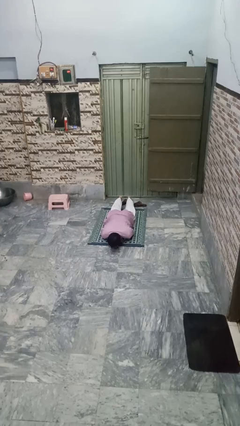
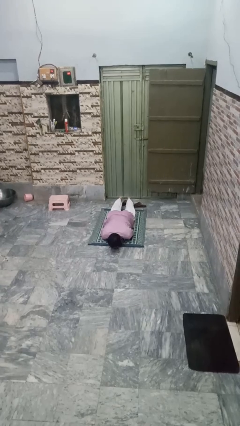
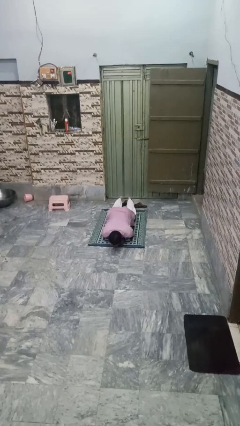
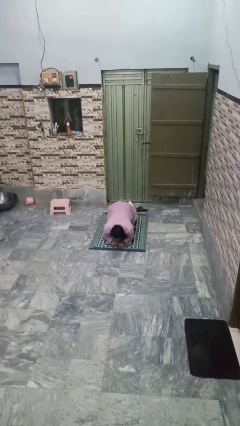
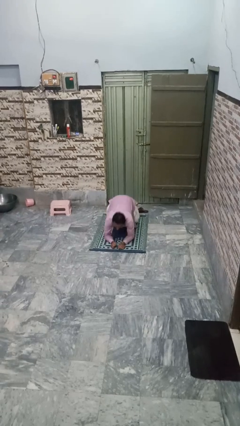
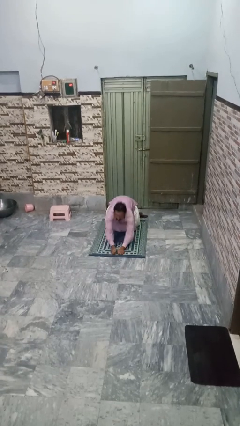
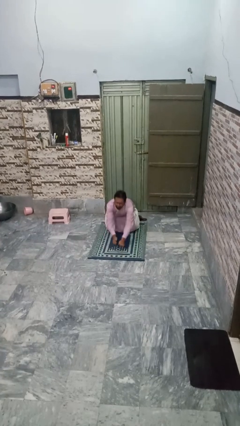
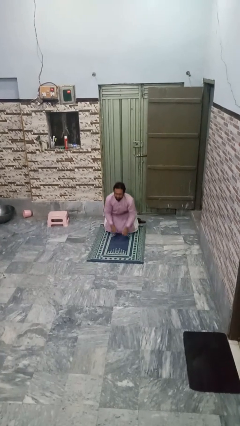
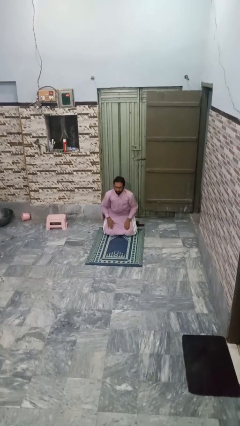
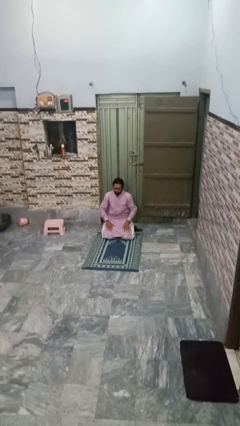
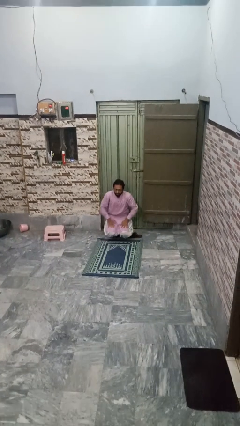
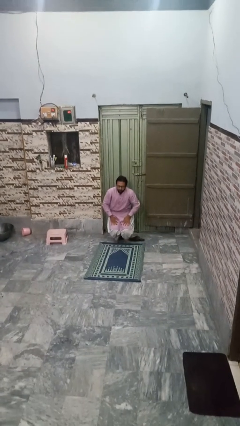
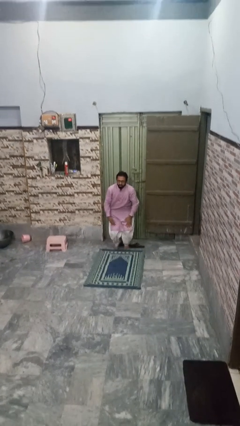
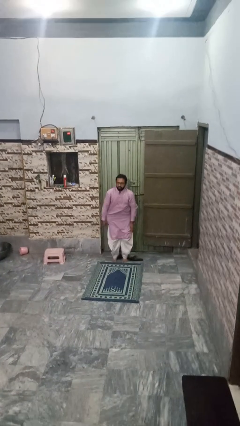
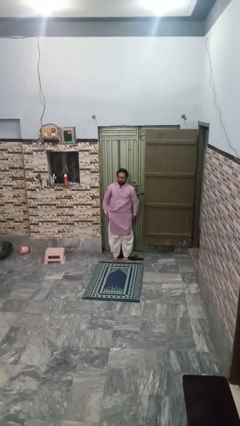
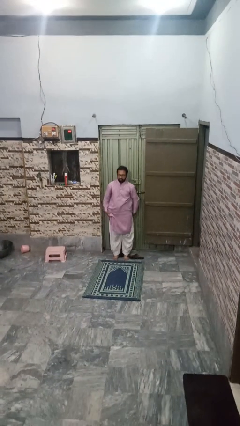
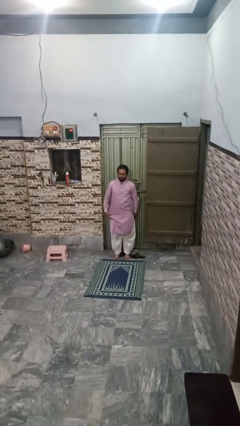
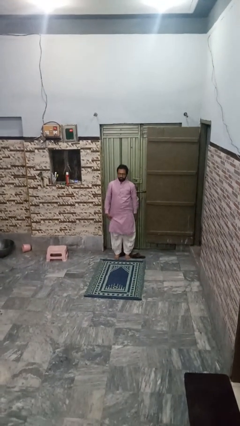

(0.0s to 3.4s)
person stands up from floor

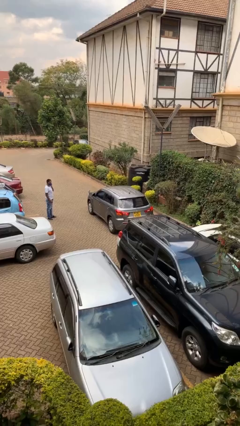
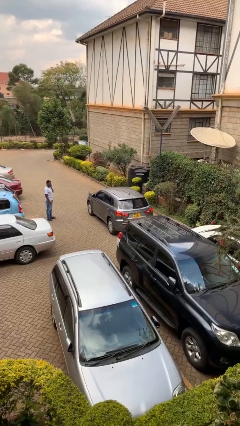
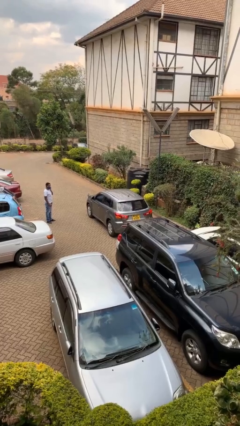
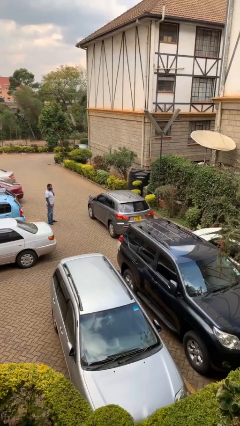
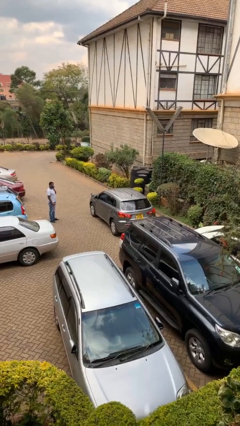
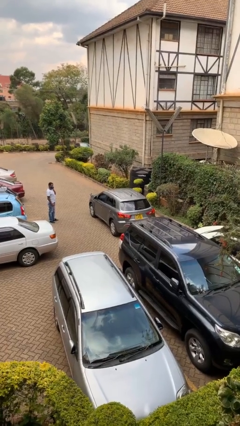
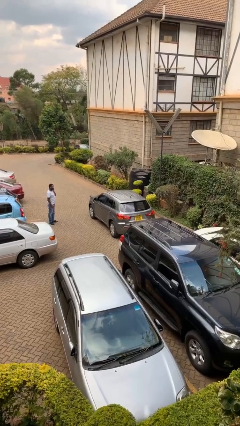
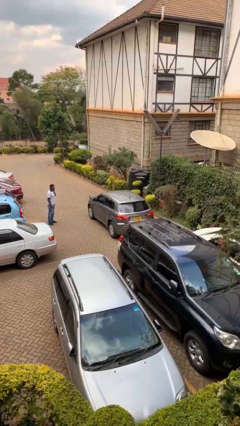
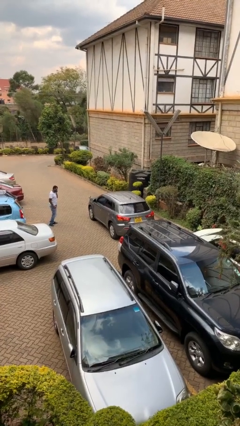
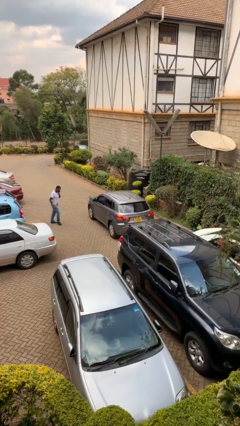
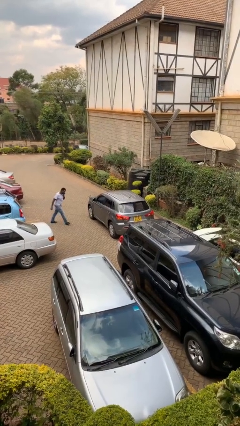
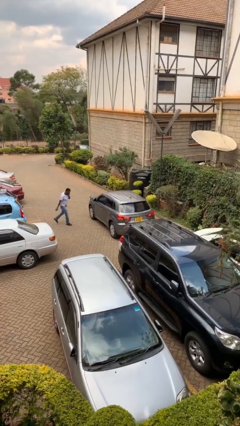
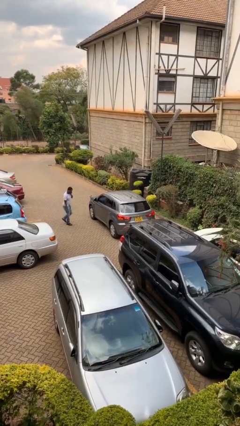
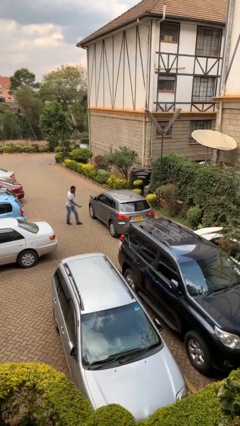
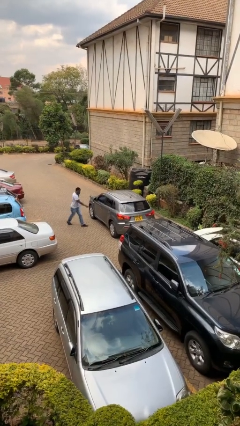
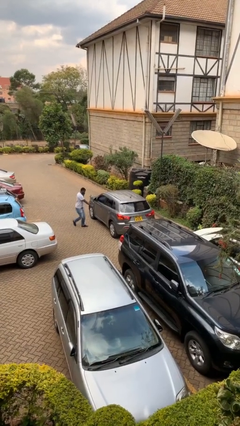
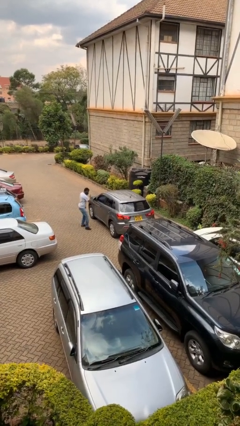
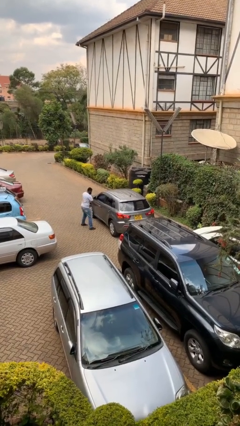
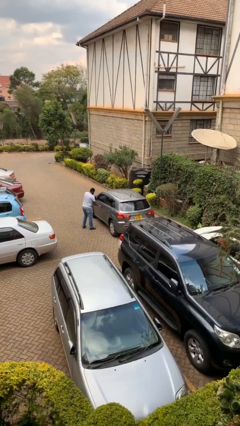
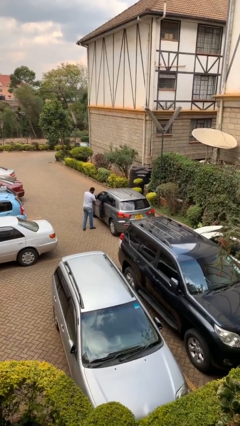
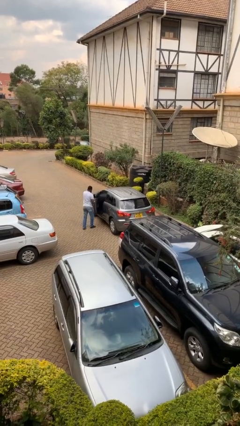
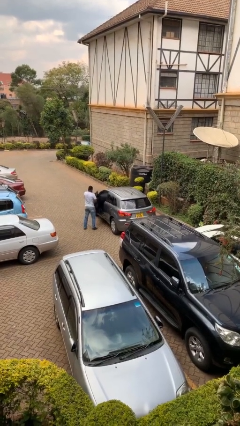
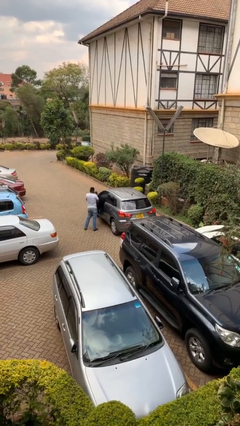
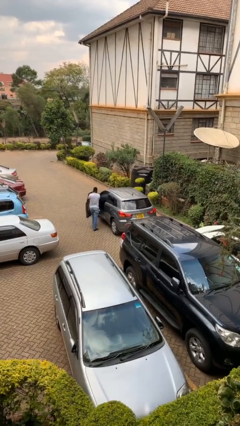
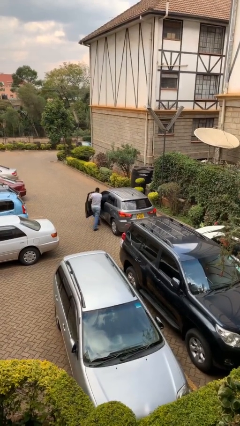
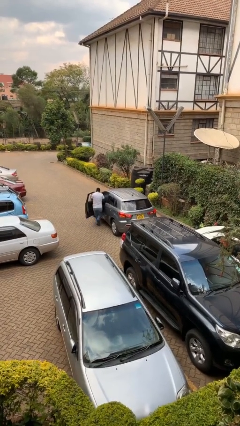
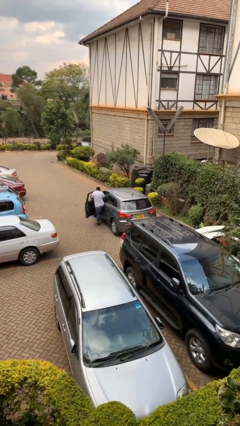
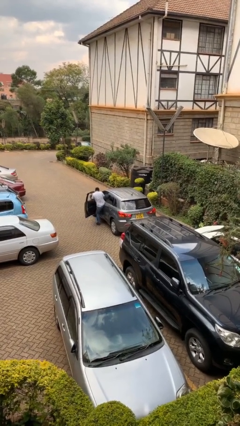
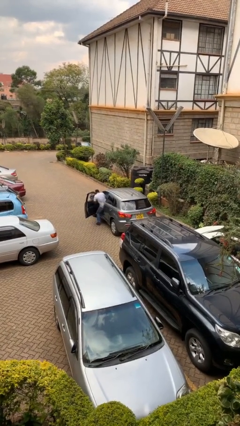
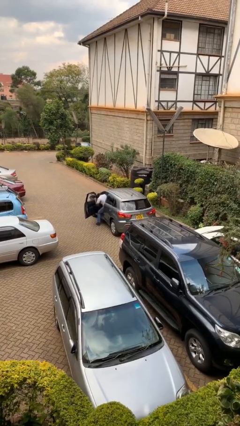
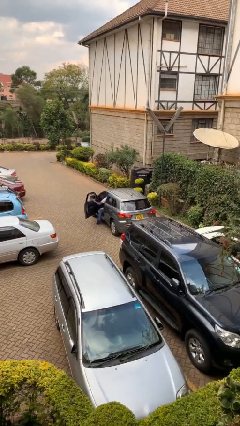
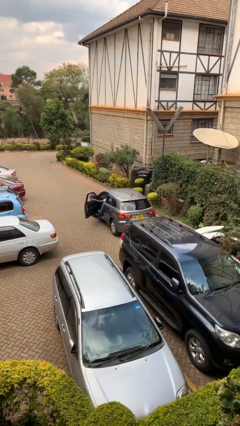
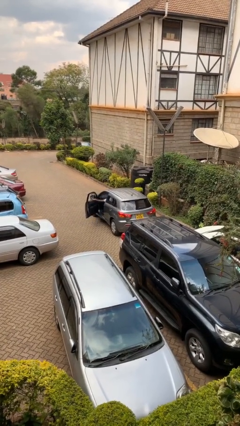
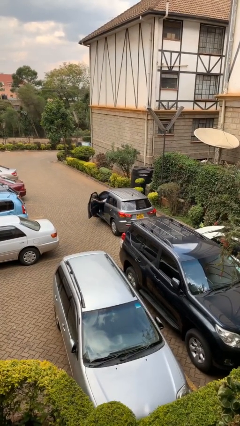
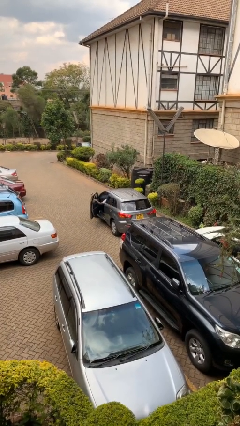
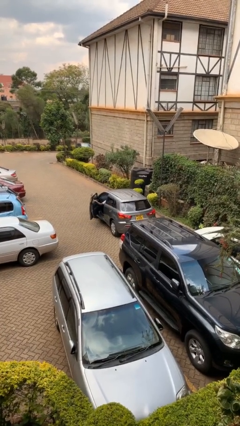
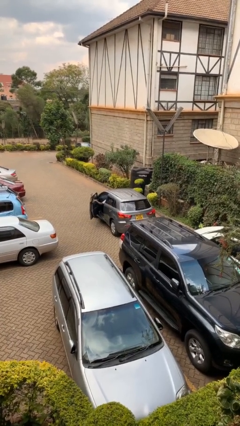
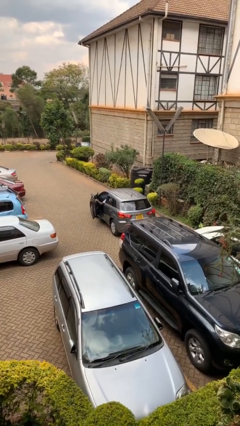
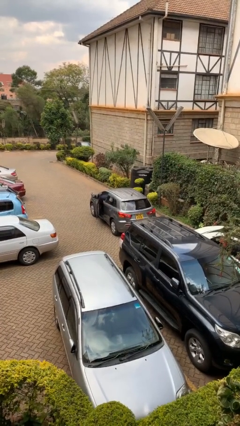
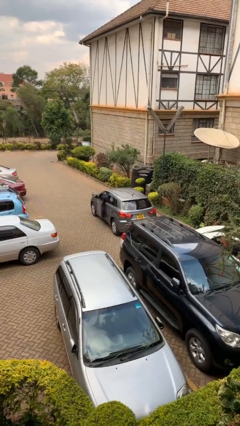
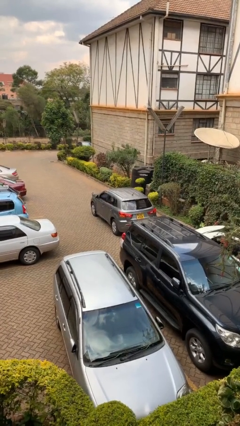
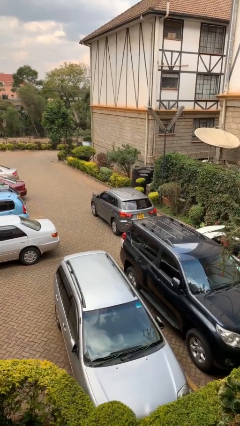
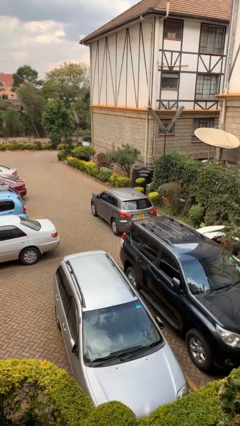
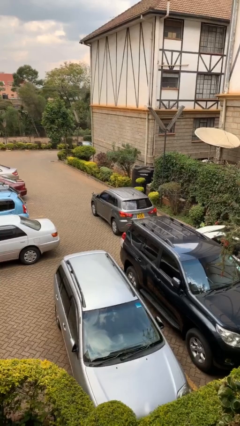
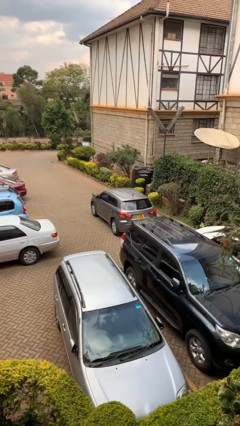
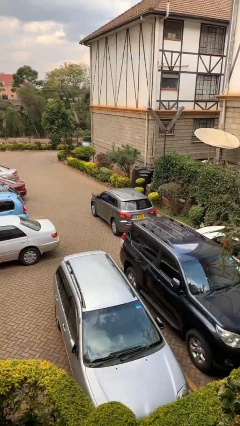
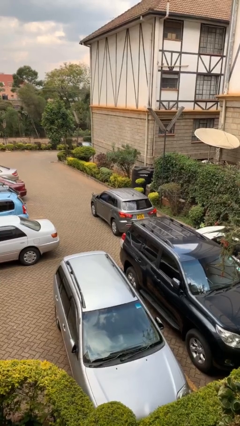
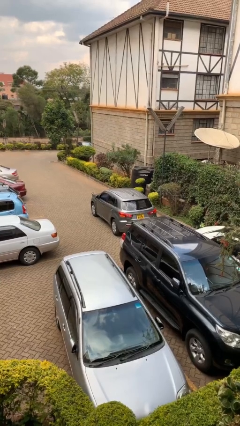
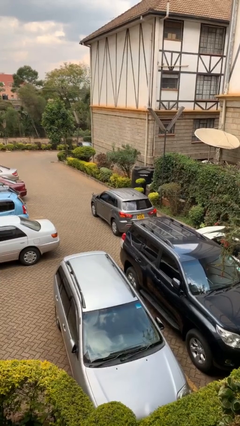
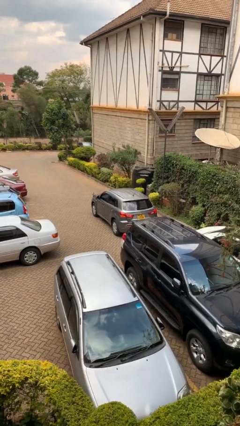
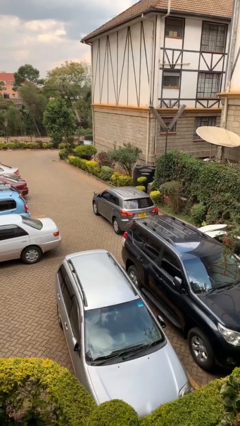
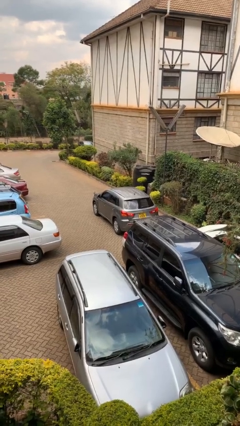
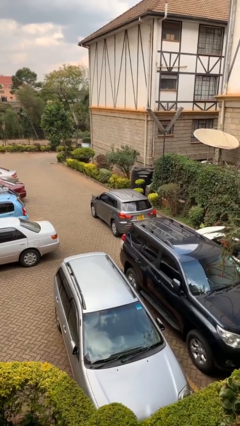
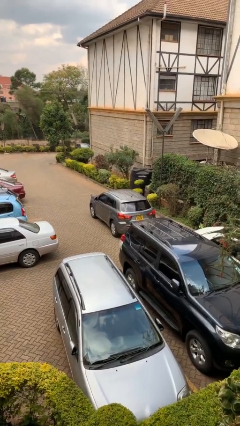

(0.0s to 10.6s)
car picks up person

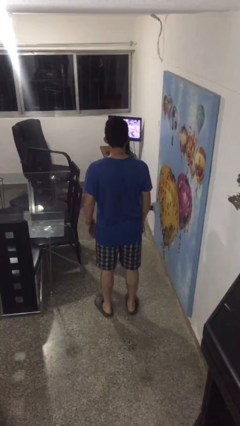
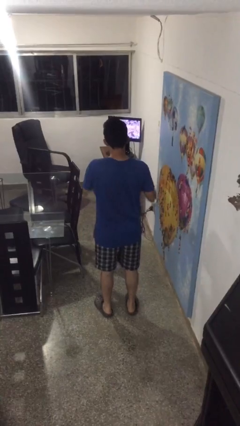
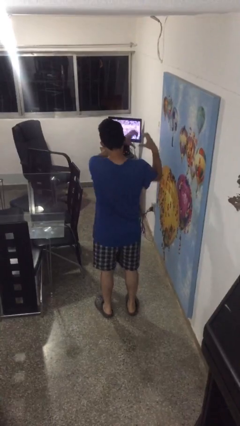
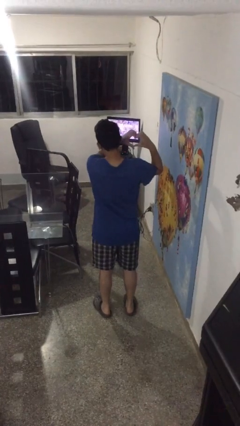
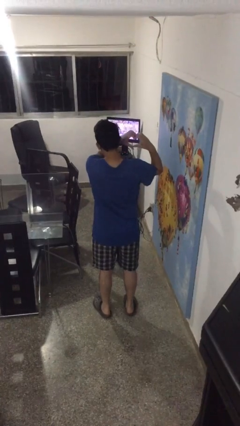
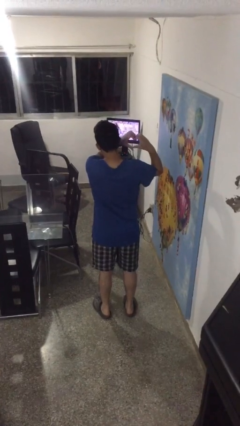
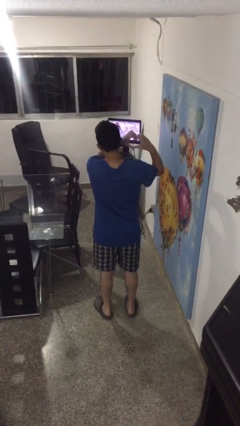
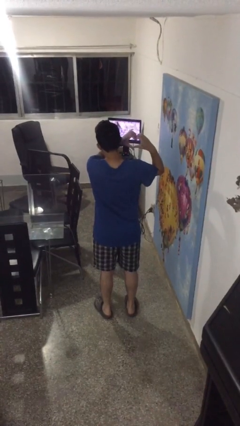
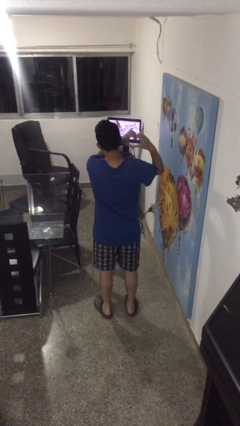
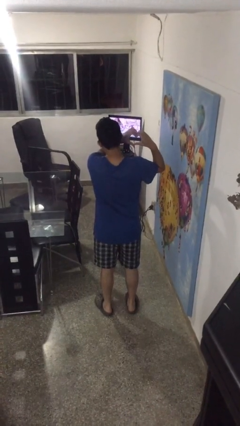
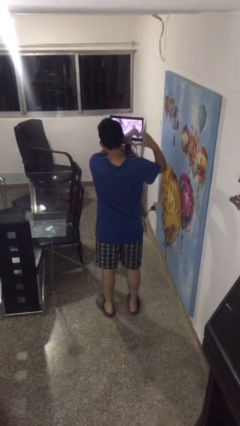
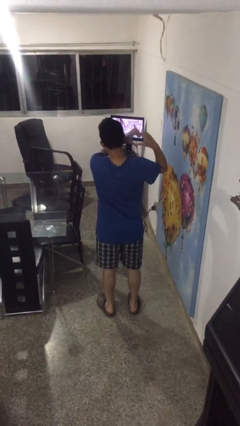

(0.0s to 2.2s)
person gestures heart

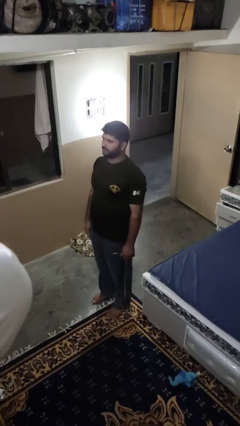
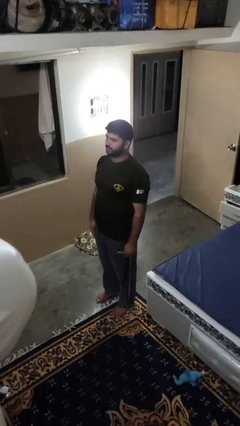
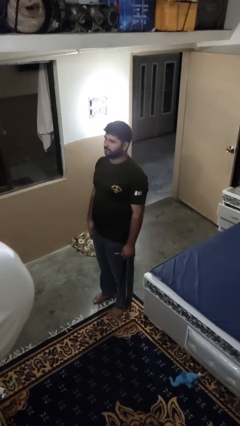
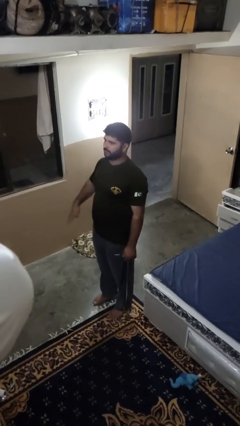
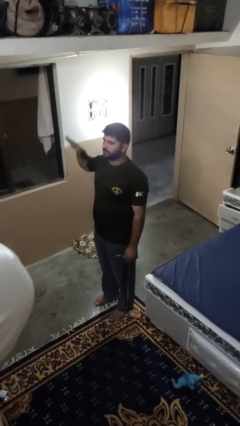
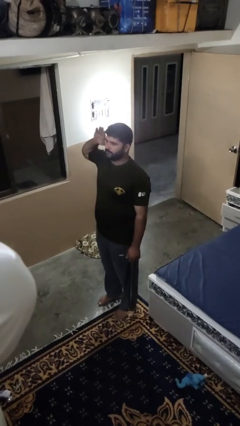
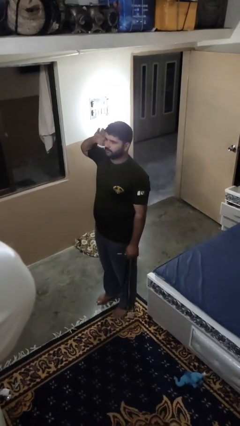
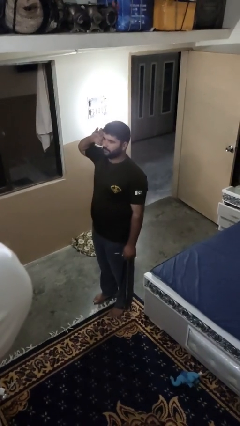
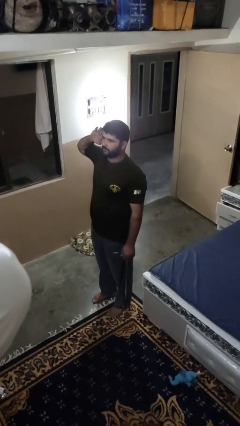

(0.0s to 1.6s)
person salutes

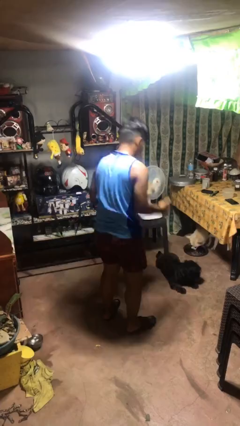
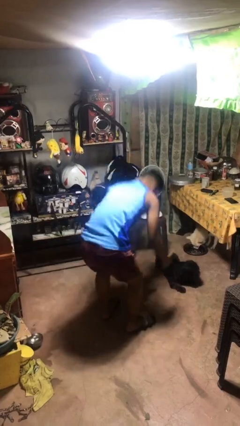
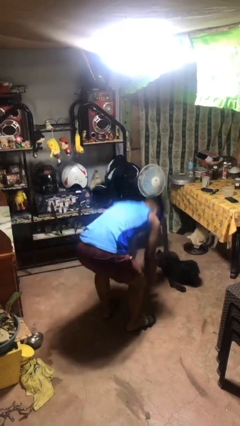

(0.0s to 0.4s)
person drops object
